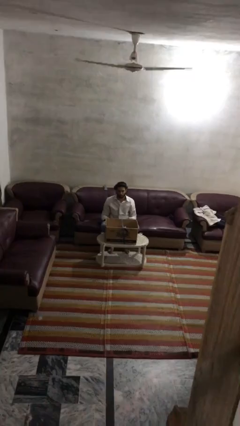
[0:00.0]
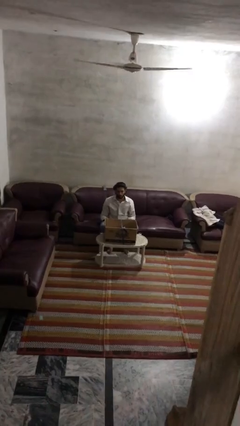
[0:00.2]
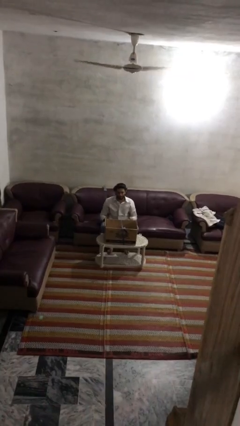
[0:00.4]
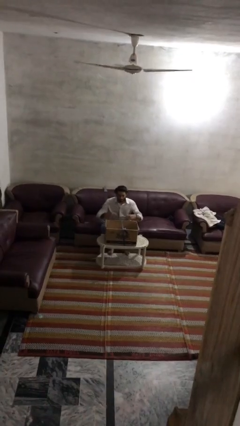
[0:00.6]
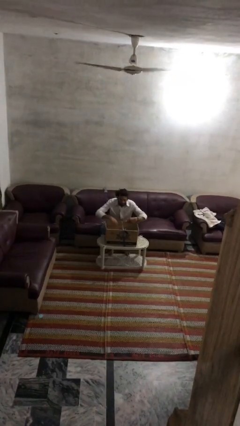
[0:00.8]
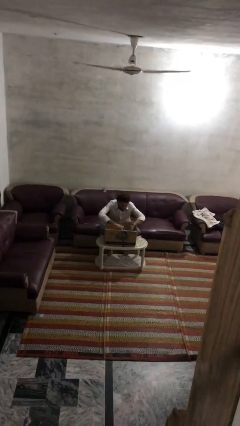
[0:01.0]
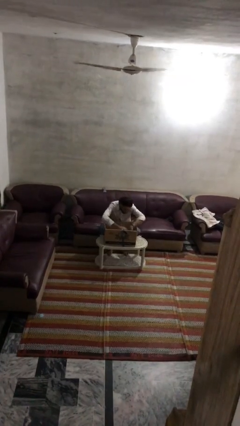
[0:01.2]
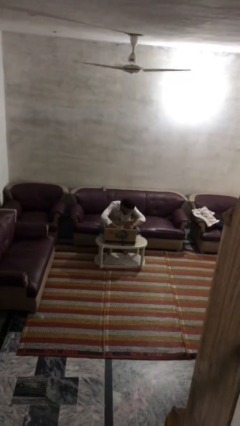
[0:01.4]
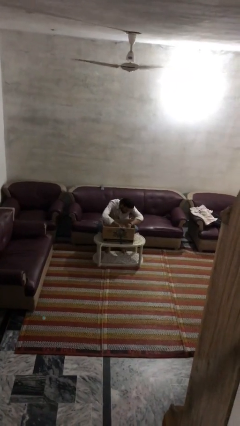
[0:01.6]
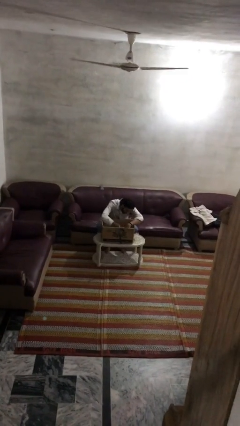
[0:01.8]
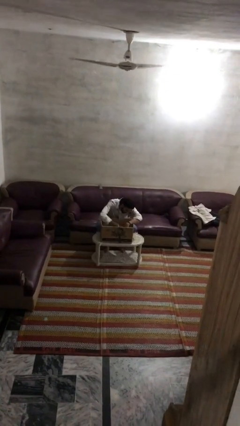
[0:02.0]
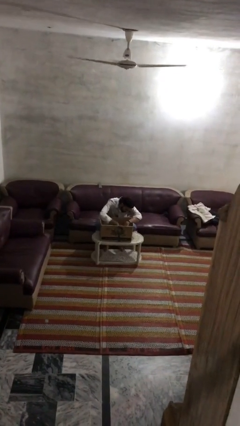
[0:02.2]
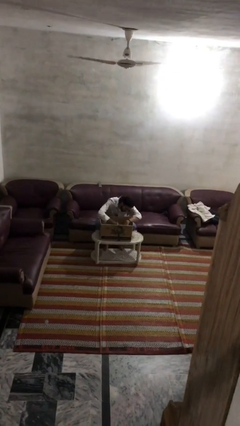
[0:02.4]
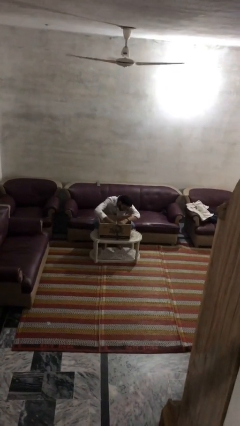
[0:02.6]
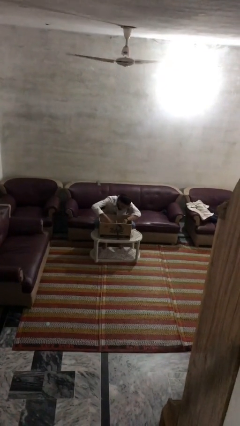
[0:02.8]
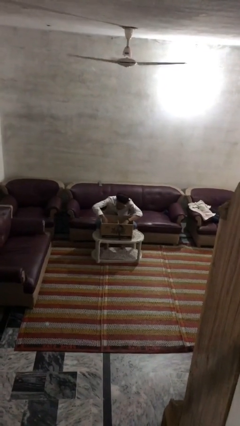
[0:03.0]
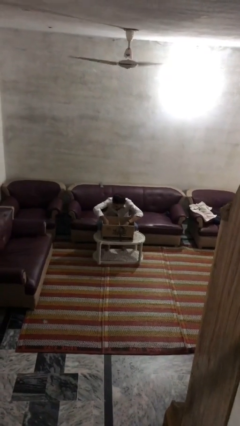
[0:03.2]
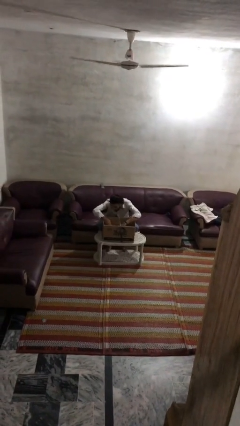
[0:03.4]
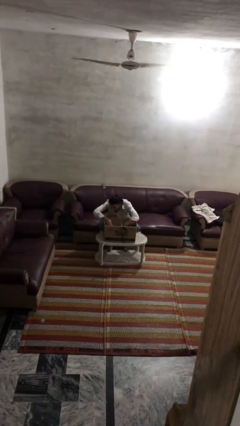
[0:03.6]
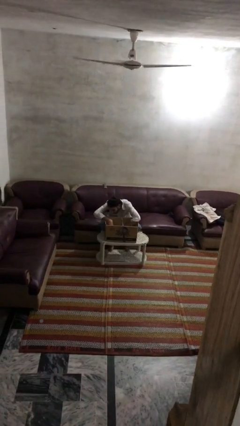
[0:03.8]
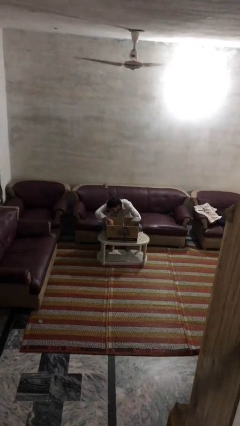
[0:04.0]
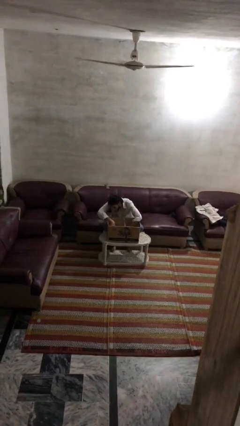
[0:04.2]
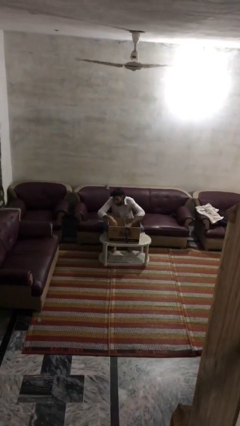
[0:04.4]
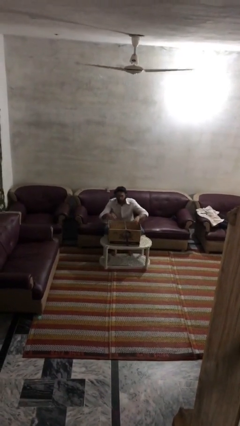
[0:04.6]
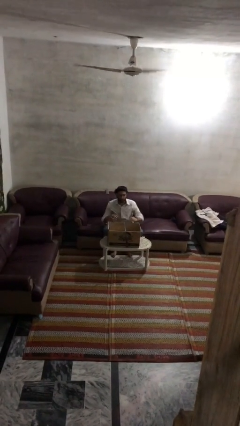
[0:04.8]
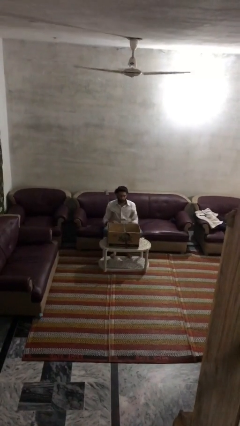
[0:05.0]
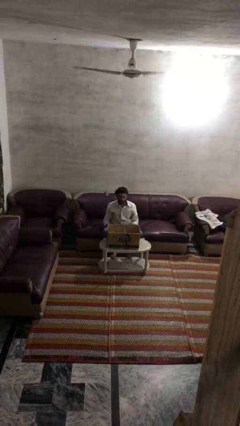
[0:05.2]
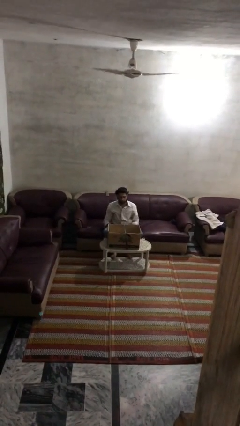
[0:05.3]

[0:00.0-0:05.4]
person searches in box

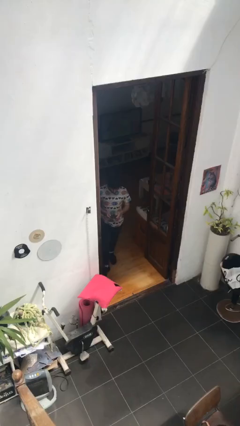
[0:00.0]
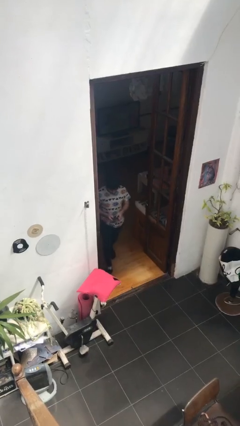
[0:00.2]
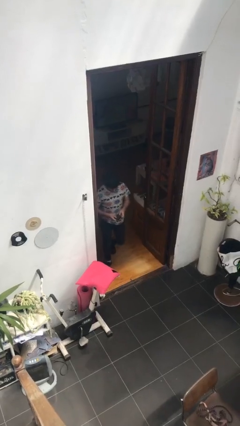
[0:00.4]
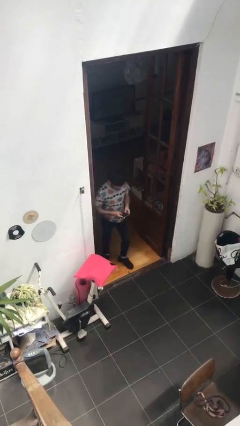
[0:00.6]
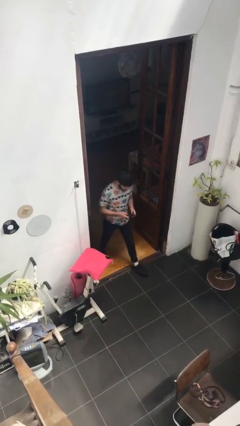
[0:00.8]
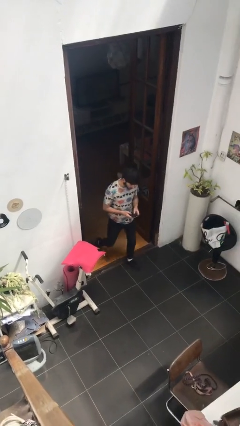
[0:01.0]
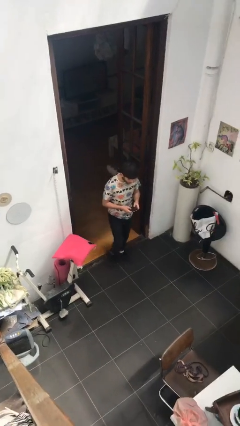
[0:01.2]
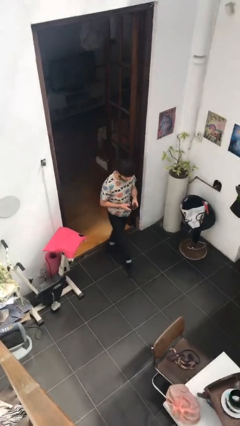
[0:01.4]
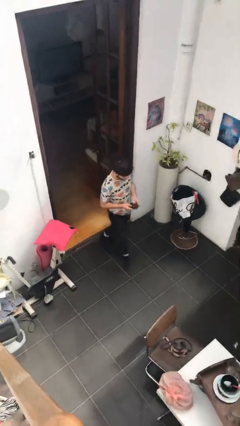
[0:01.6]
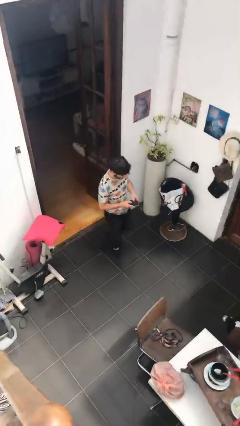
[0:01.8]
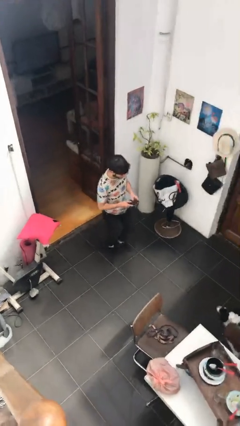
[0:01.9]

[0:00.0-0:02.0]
person enters scene through structure

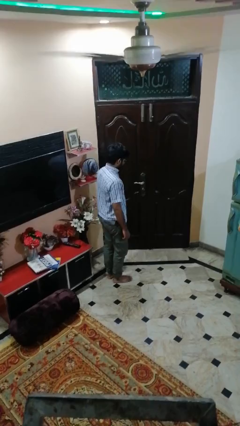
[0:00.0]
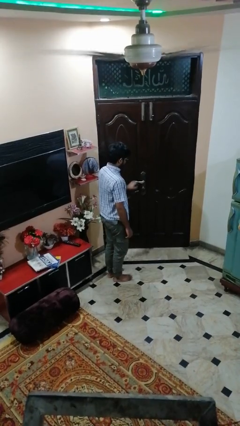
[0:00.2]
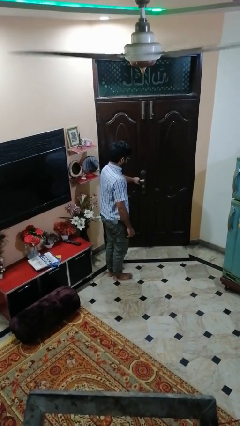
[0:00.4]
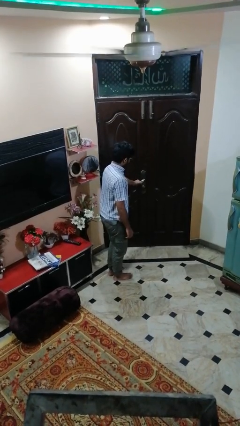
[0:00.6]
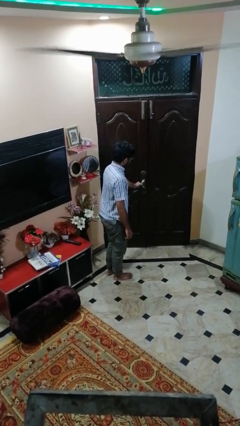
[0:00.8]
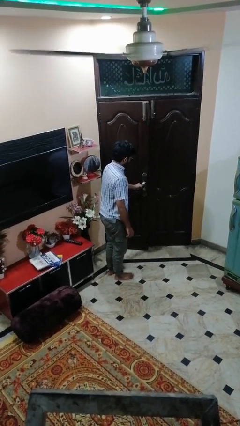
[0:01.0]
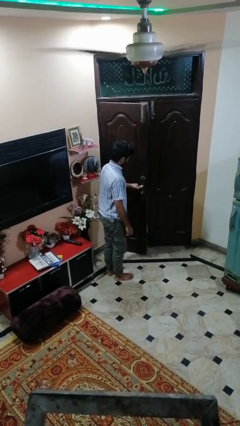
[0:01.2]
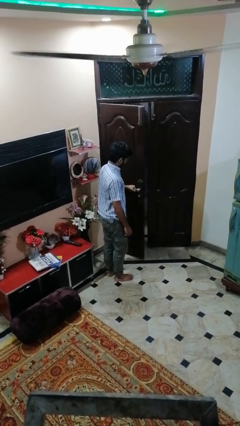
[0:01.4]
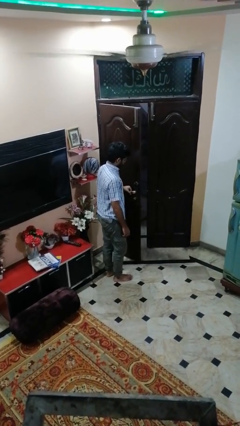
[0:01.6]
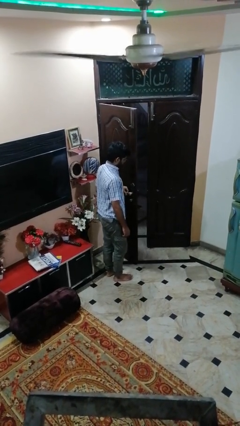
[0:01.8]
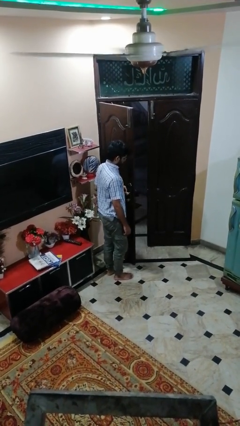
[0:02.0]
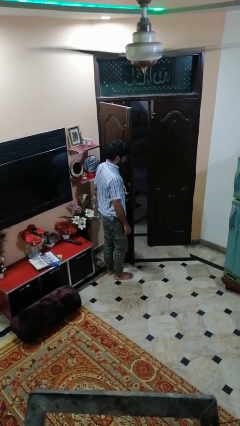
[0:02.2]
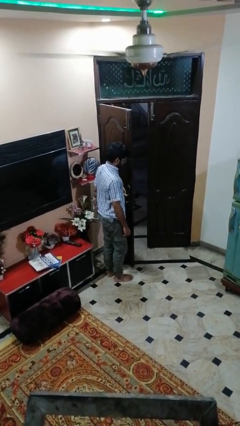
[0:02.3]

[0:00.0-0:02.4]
person opens facility door

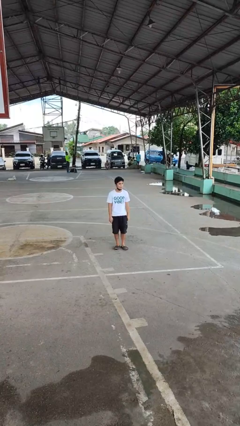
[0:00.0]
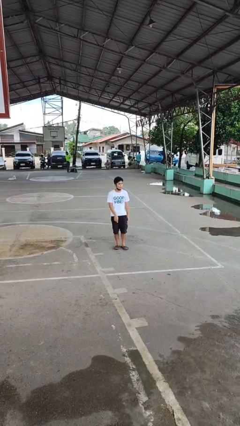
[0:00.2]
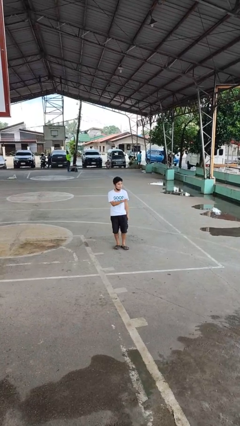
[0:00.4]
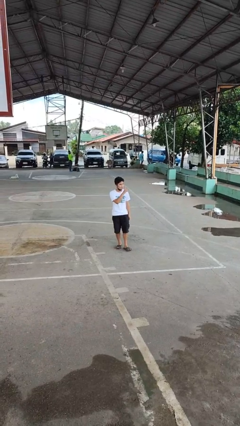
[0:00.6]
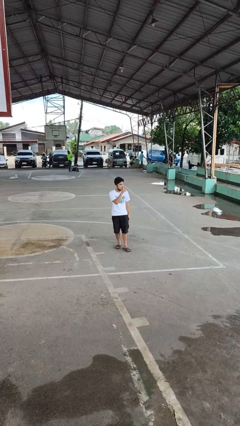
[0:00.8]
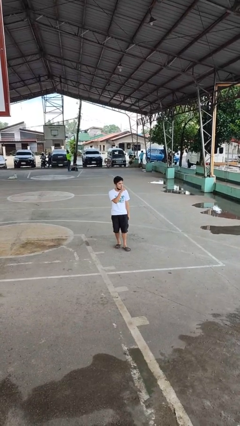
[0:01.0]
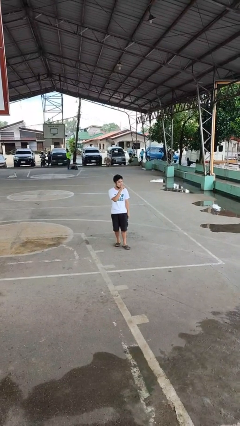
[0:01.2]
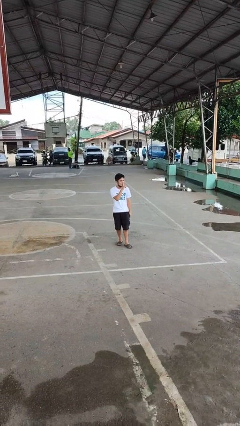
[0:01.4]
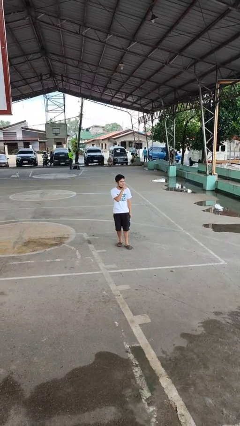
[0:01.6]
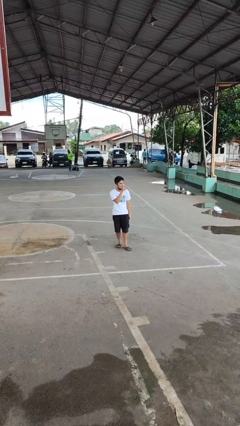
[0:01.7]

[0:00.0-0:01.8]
person gestures be quiet

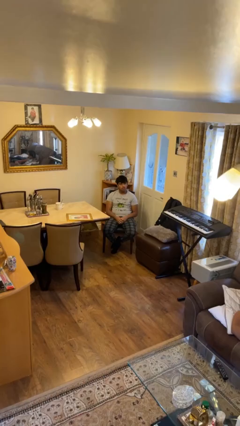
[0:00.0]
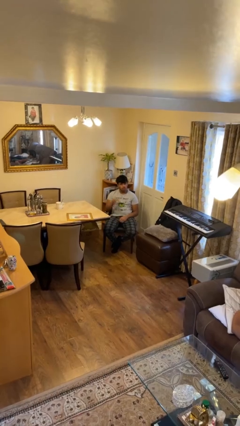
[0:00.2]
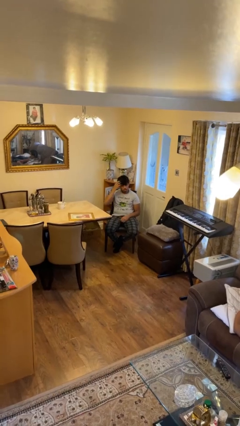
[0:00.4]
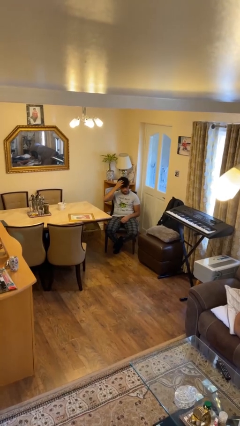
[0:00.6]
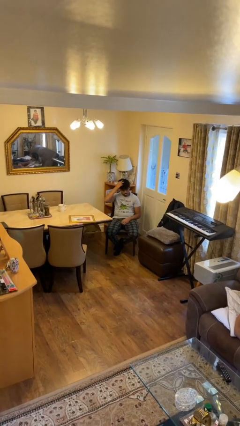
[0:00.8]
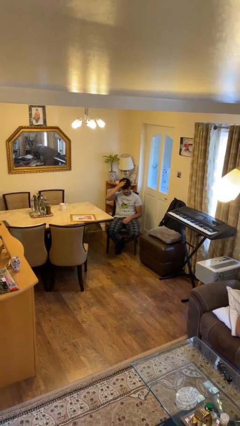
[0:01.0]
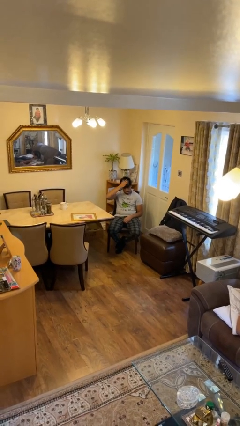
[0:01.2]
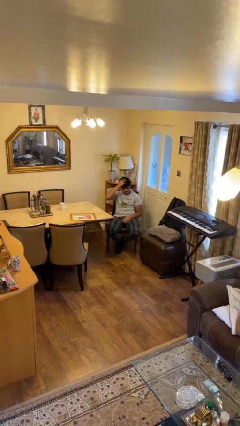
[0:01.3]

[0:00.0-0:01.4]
person strokes hair

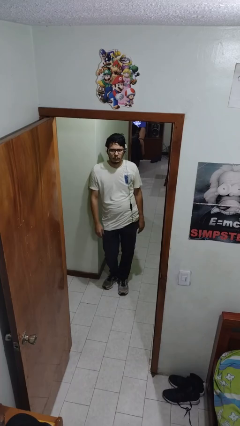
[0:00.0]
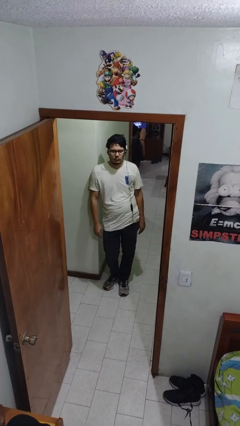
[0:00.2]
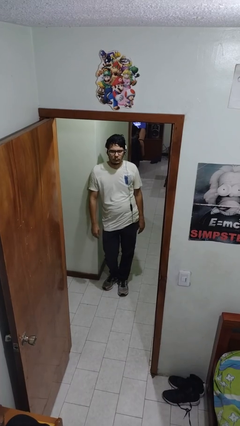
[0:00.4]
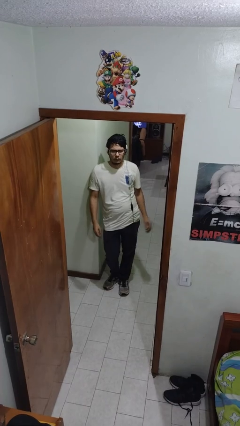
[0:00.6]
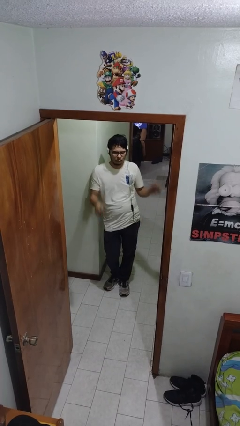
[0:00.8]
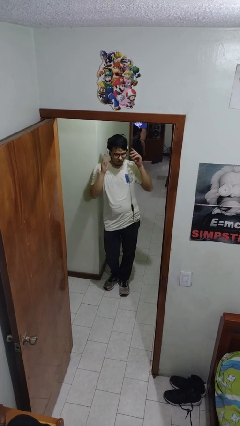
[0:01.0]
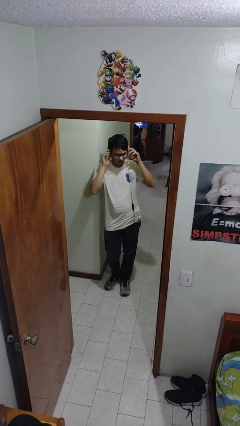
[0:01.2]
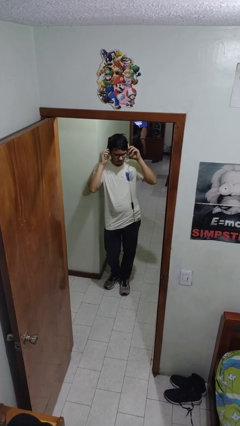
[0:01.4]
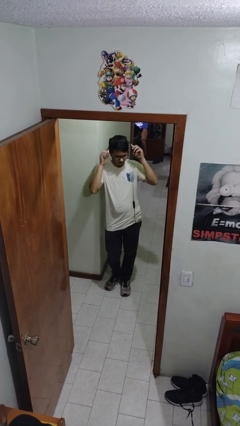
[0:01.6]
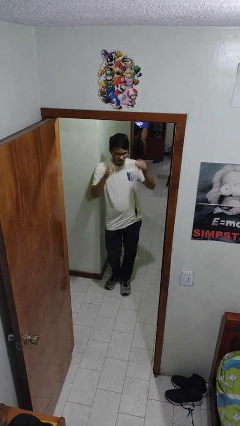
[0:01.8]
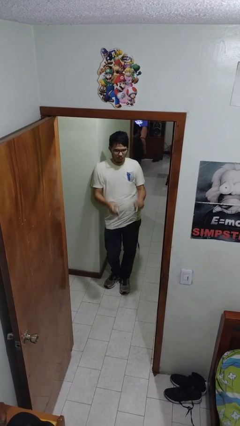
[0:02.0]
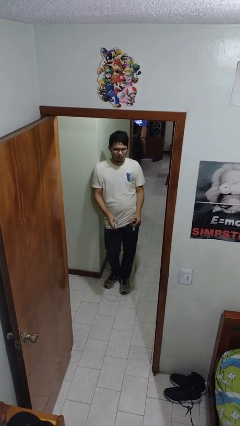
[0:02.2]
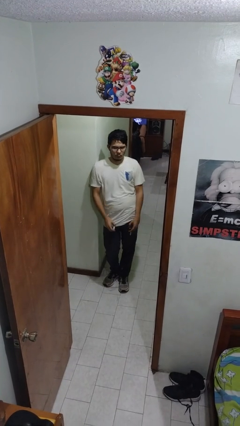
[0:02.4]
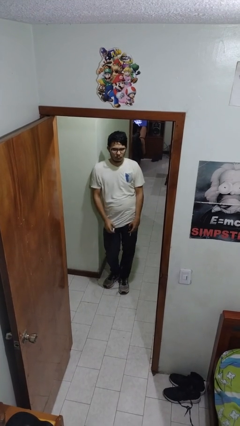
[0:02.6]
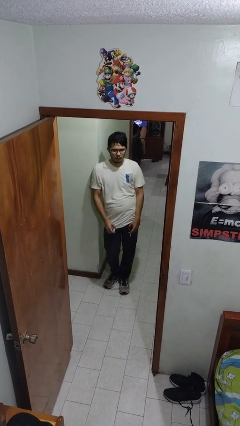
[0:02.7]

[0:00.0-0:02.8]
person takes off headphones

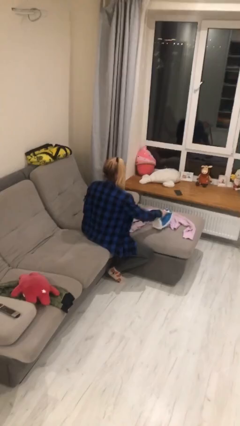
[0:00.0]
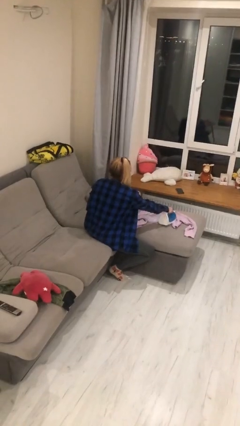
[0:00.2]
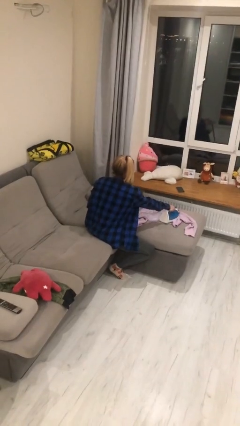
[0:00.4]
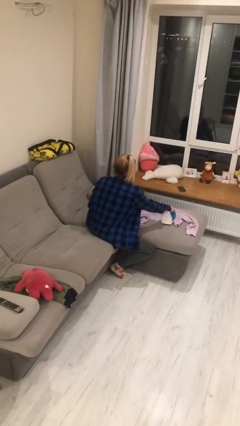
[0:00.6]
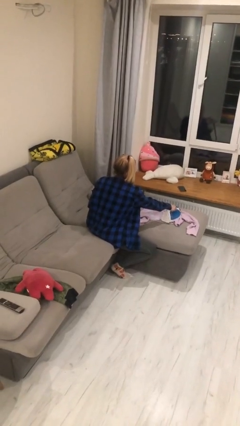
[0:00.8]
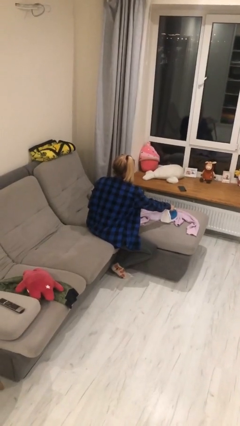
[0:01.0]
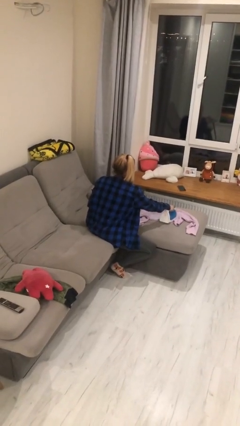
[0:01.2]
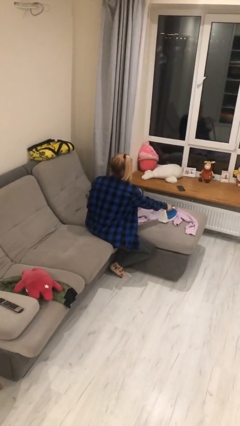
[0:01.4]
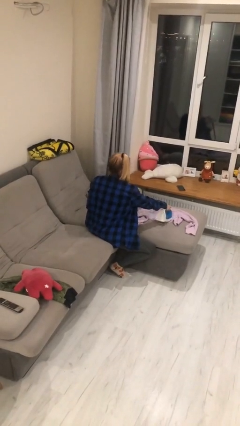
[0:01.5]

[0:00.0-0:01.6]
person irons clothes
